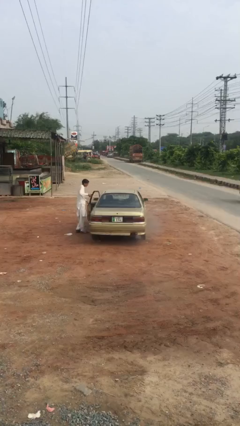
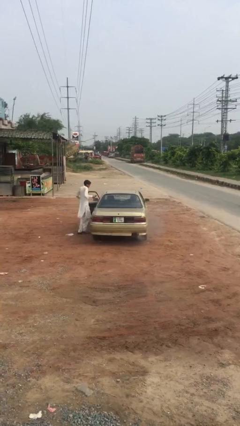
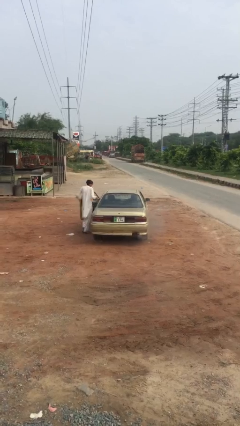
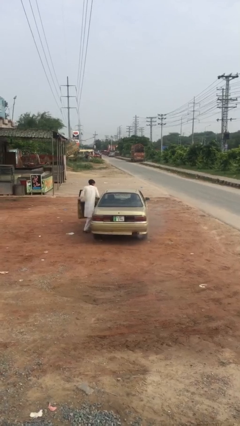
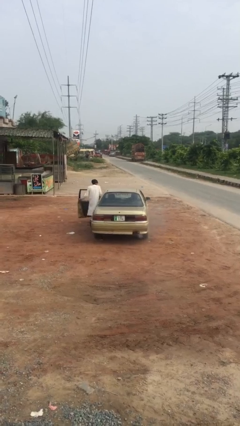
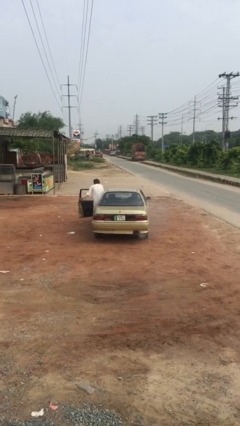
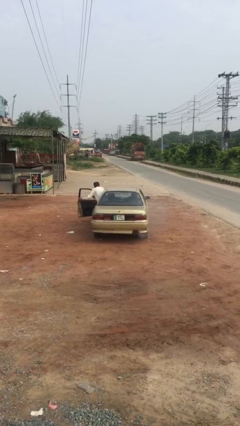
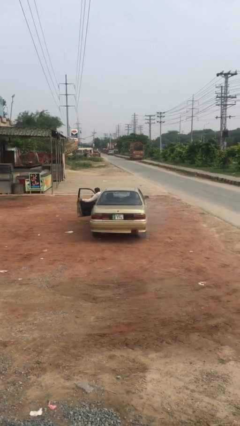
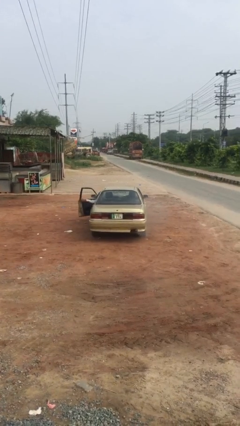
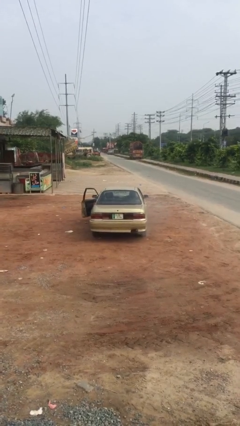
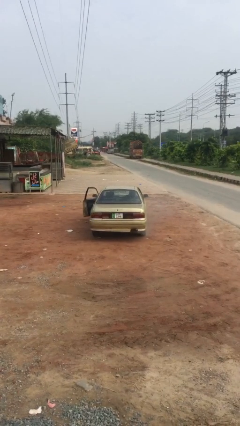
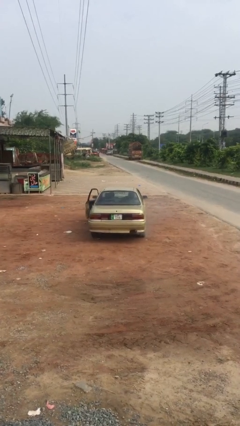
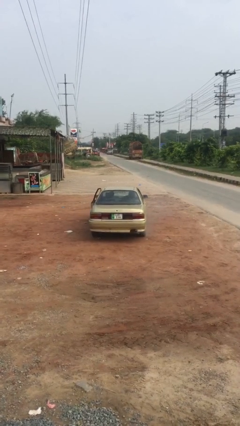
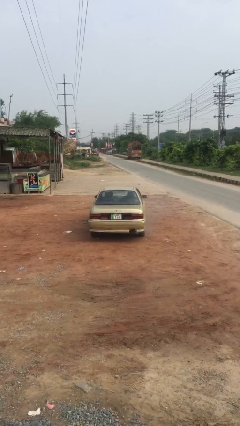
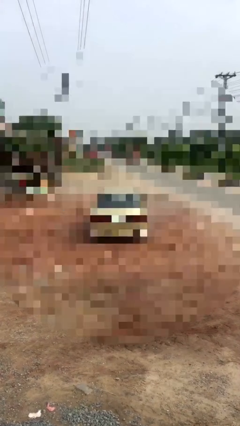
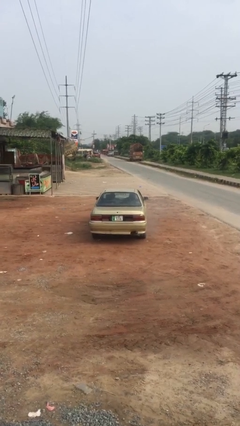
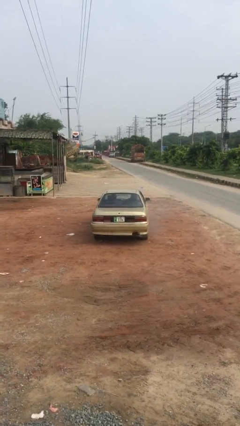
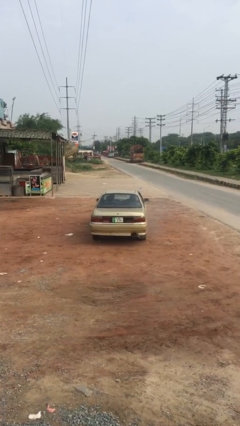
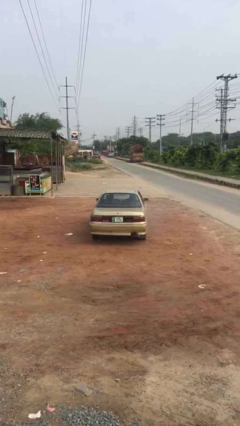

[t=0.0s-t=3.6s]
car picks up person

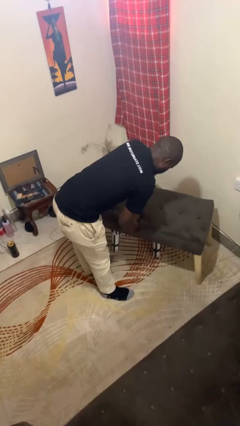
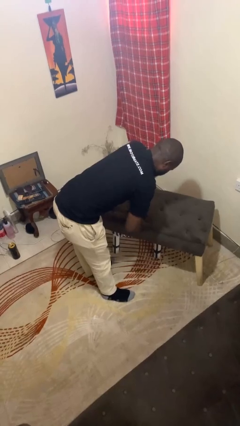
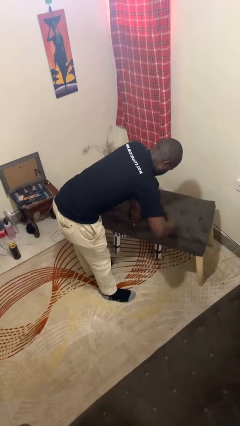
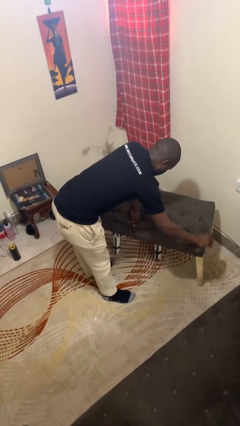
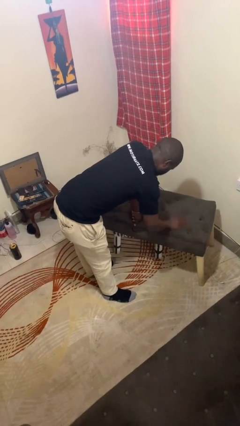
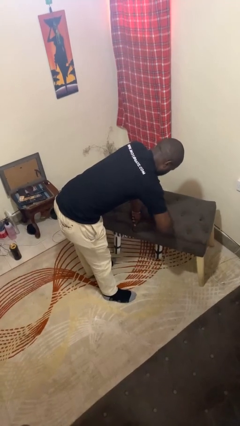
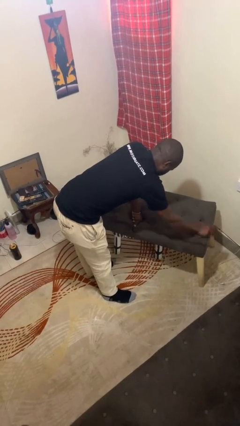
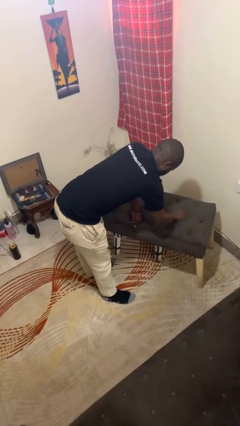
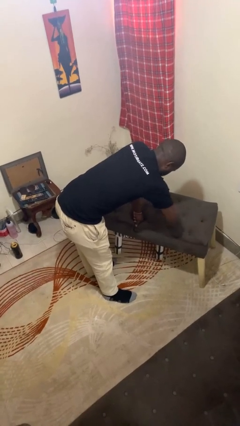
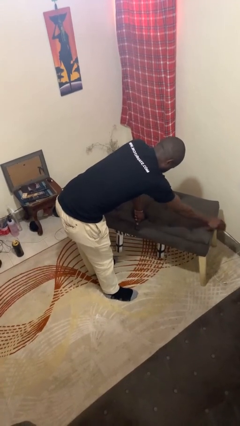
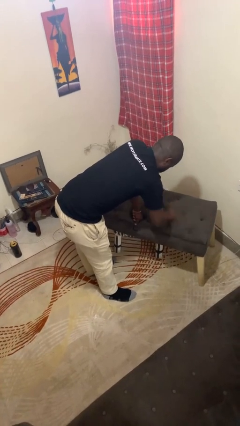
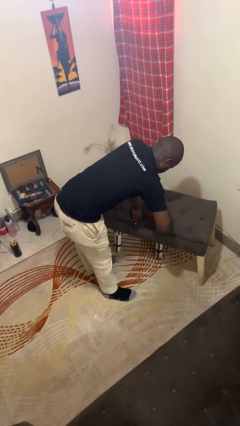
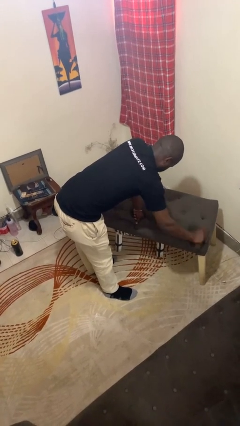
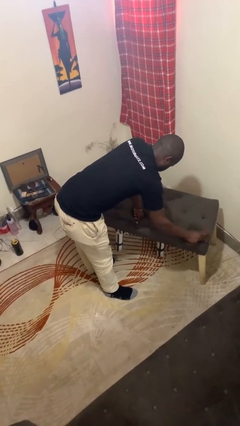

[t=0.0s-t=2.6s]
person cleans table with rag

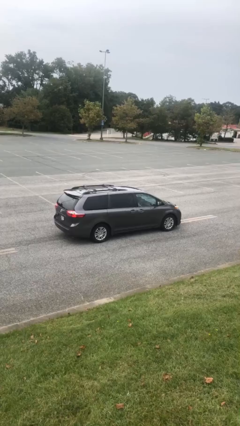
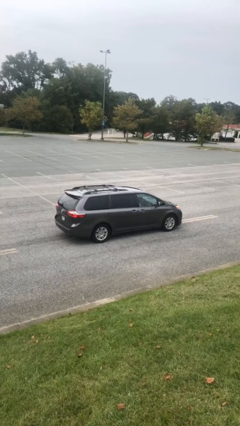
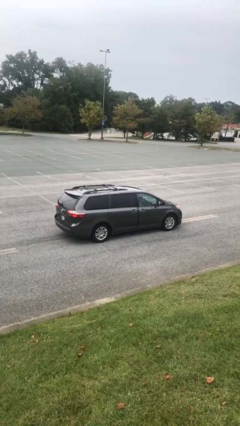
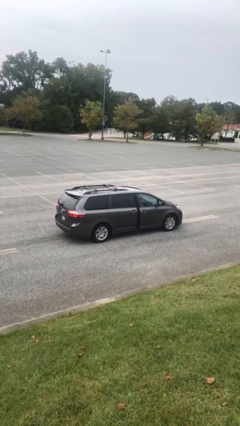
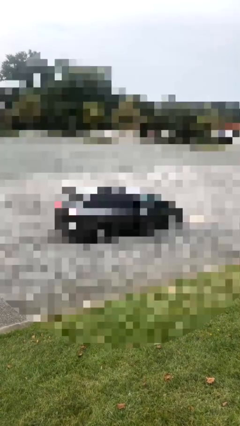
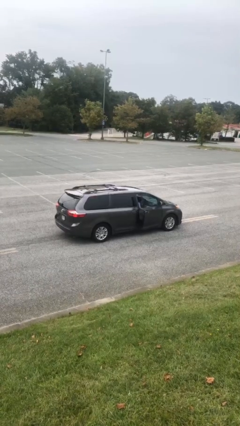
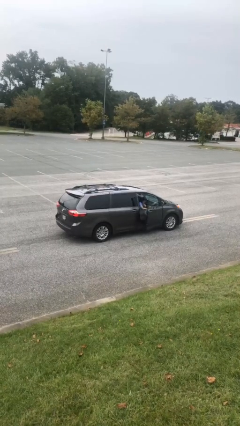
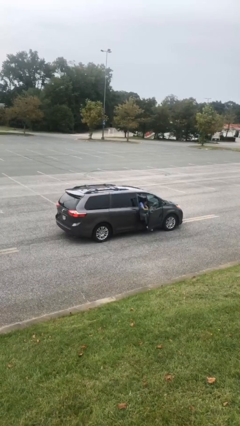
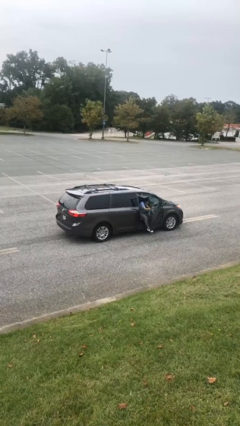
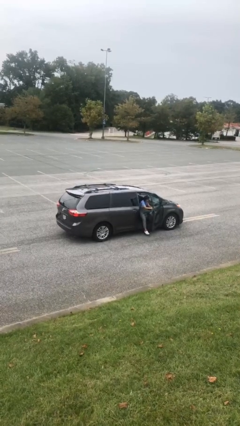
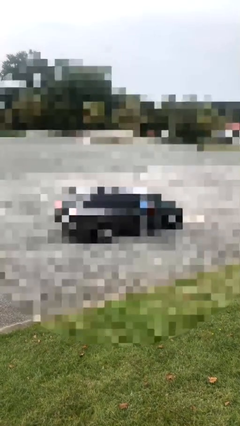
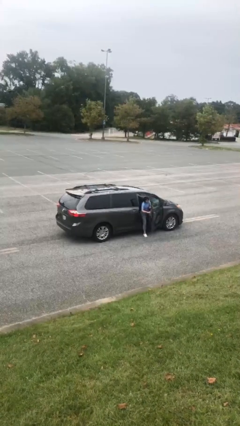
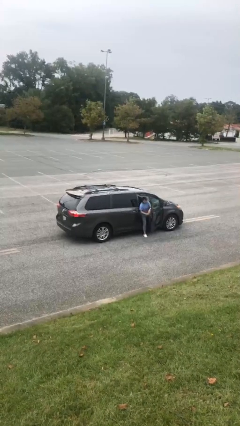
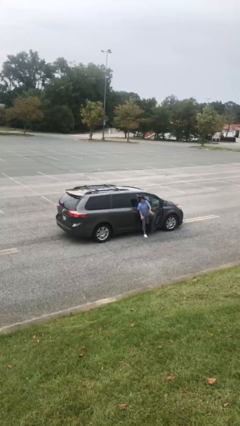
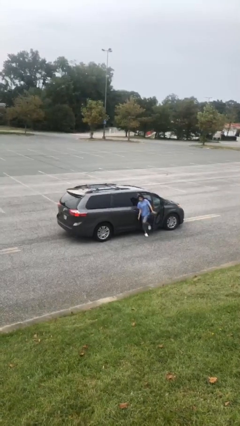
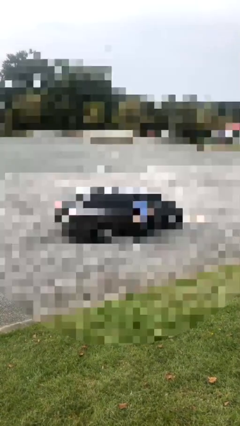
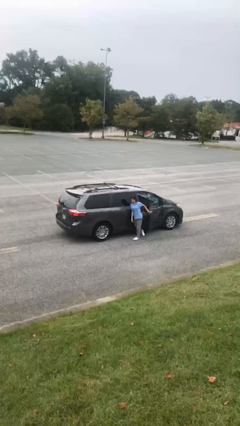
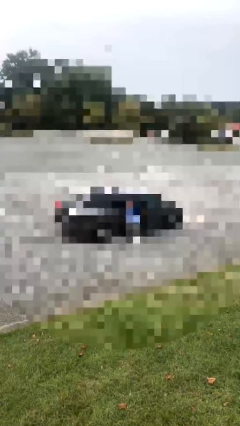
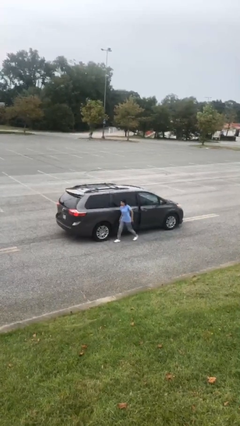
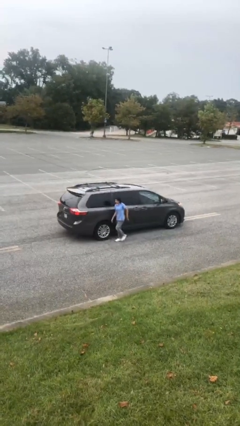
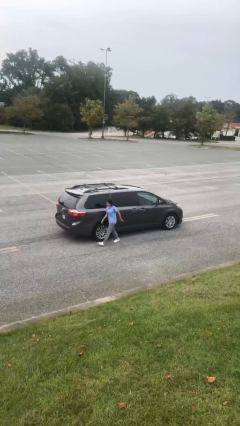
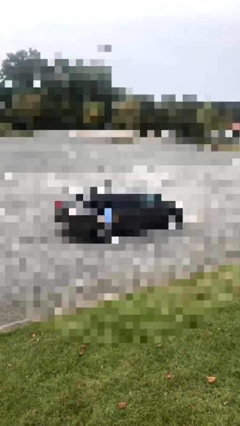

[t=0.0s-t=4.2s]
car drops off person

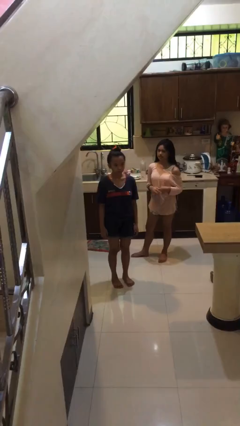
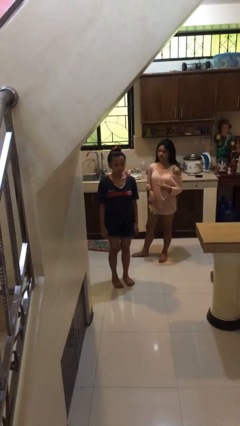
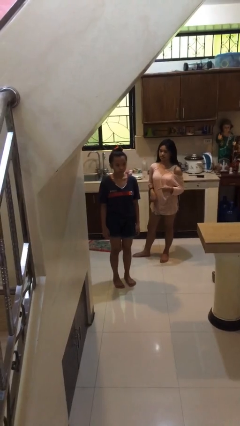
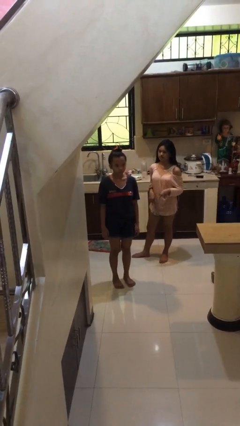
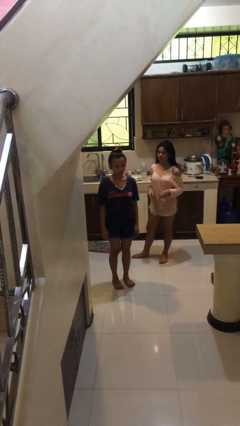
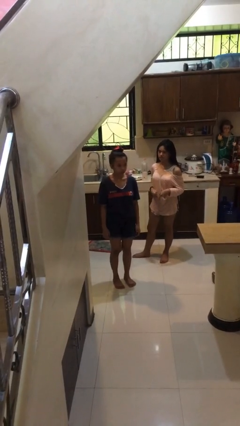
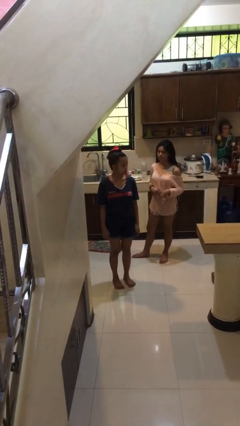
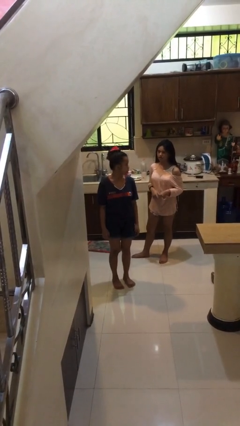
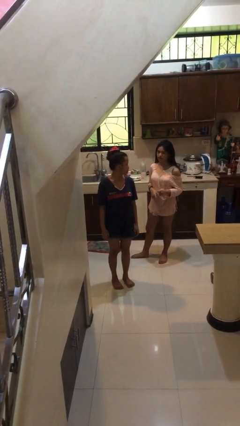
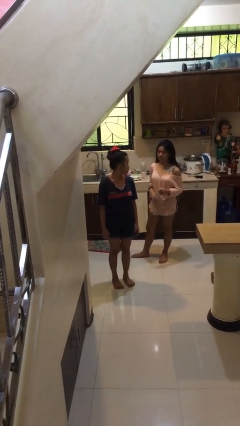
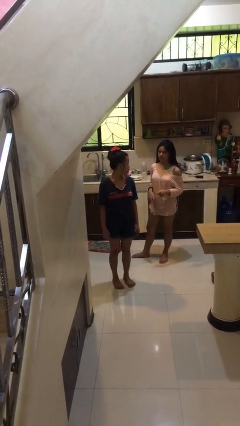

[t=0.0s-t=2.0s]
person looks over shoulder

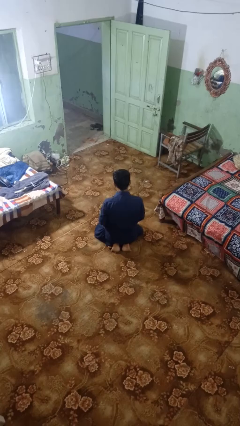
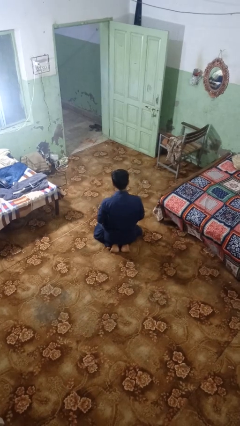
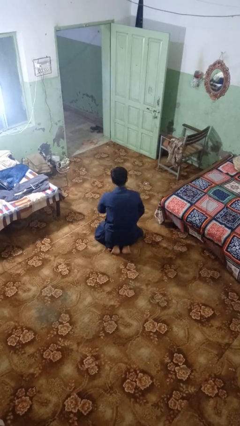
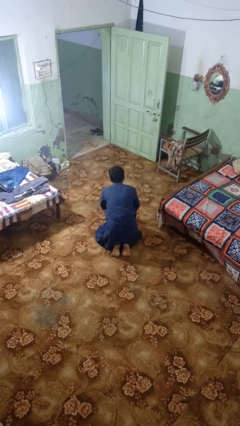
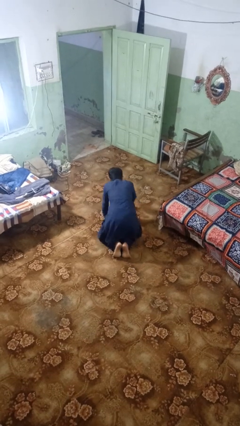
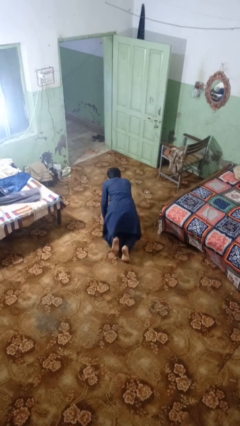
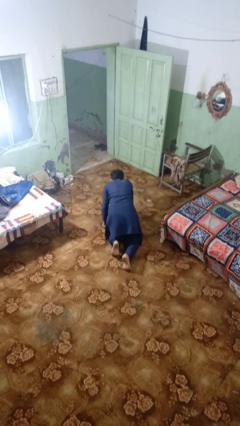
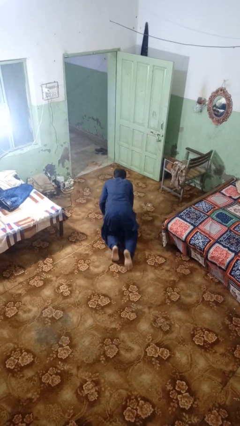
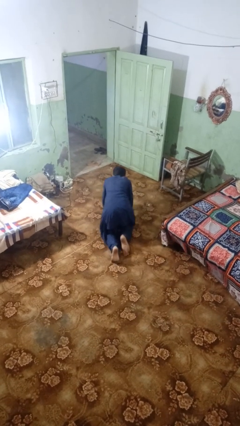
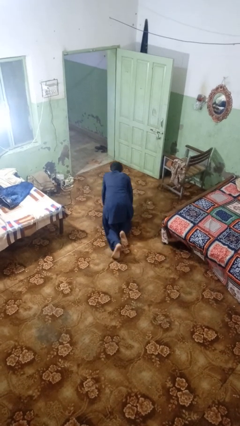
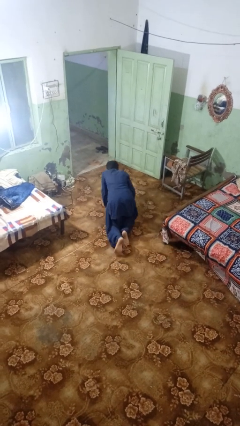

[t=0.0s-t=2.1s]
person crawls

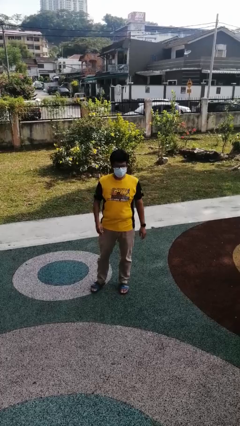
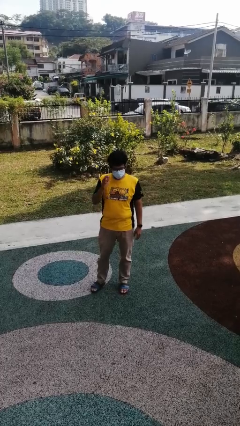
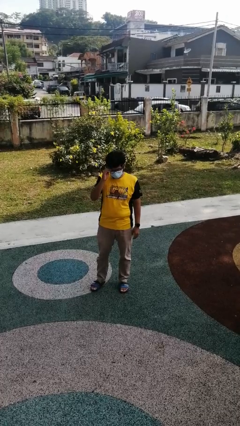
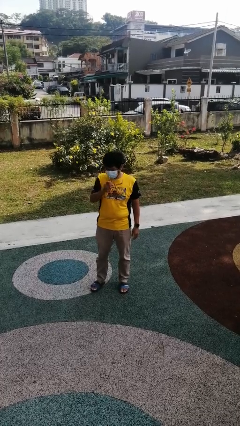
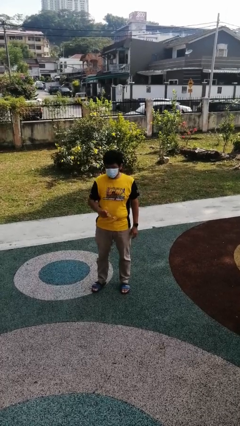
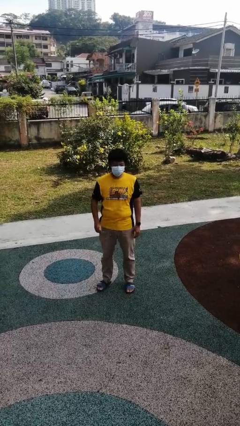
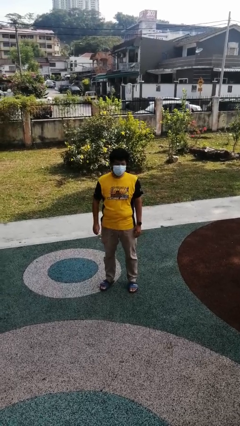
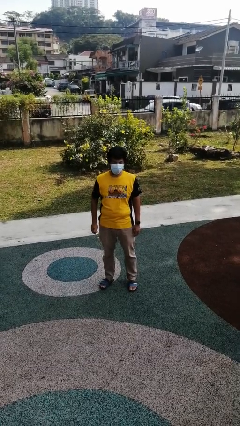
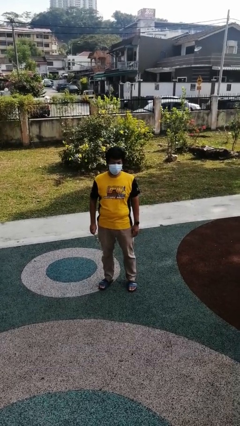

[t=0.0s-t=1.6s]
person takes off glasses

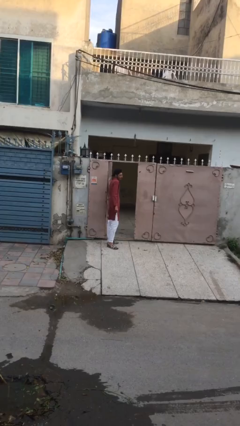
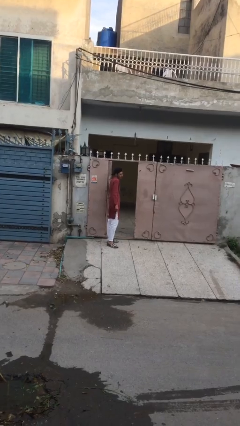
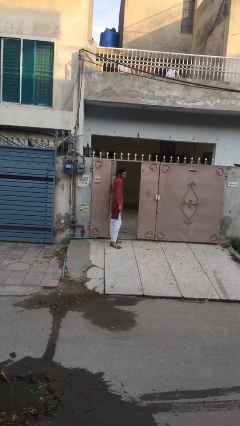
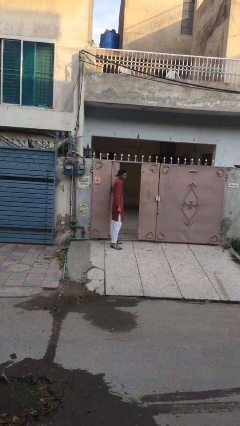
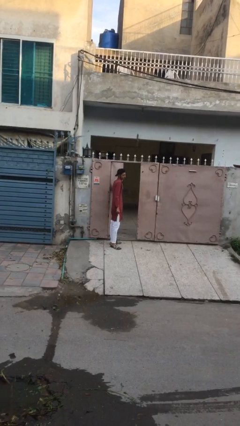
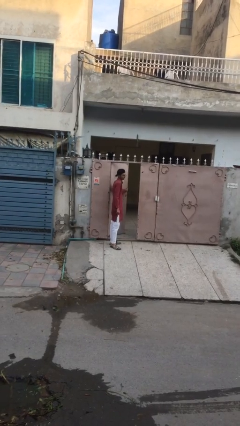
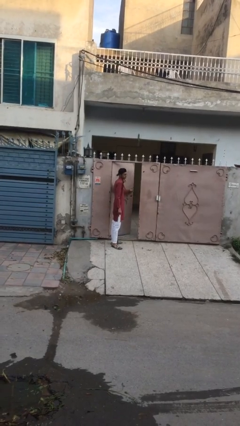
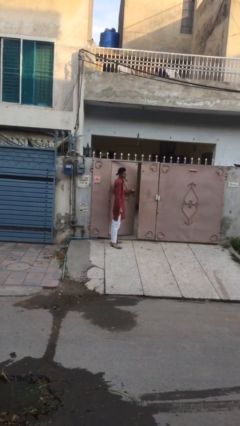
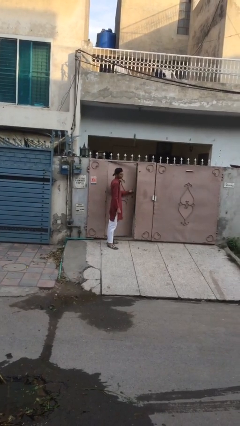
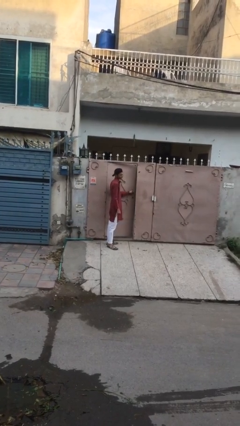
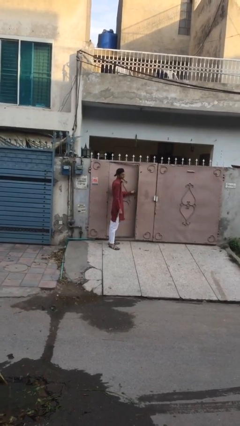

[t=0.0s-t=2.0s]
person closes facility door
